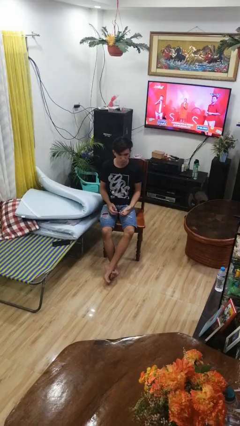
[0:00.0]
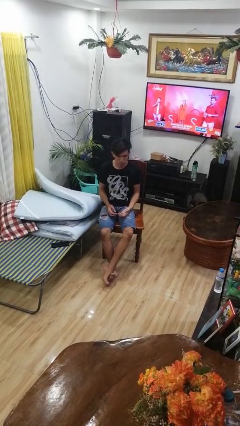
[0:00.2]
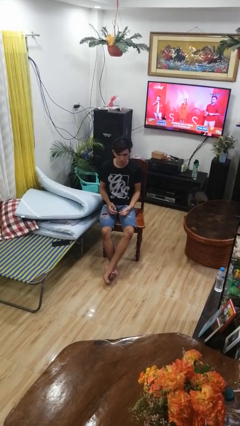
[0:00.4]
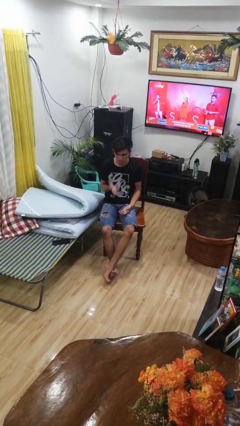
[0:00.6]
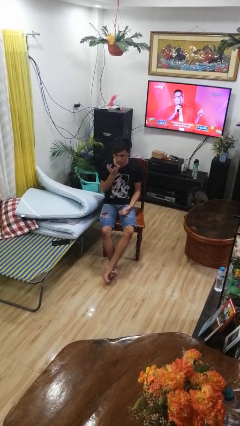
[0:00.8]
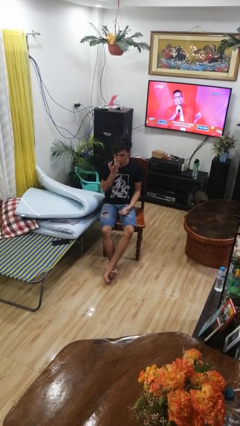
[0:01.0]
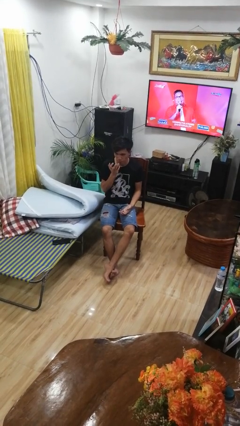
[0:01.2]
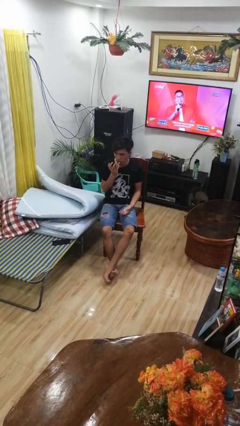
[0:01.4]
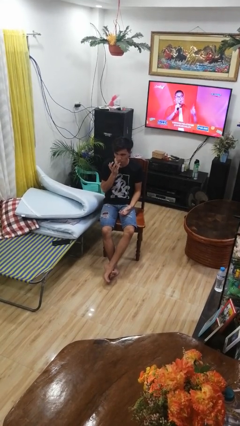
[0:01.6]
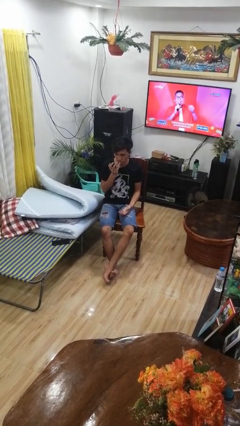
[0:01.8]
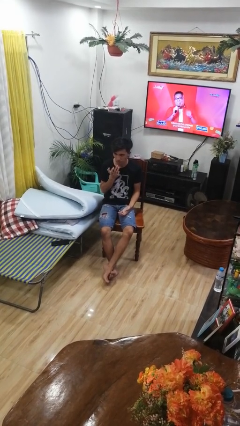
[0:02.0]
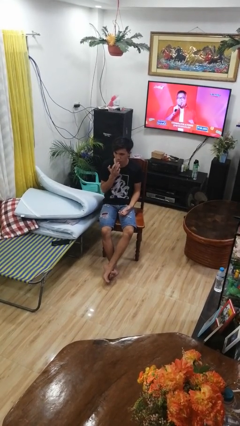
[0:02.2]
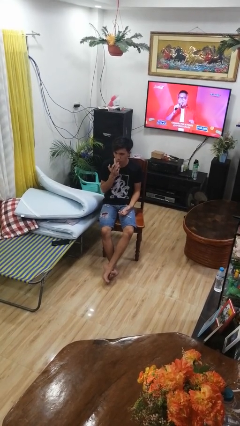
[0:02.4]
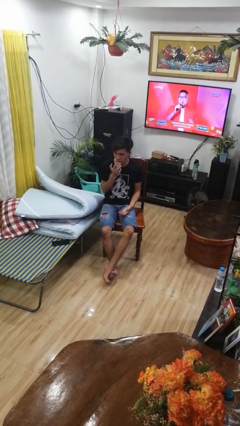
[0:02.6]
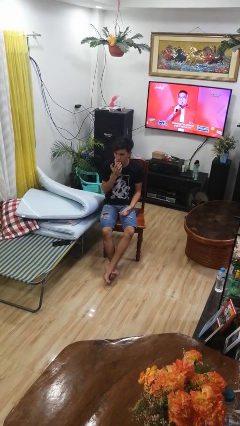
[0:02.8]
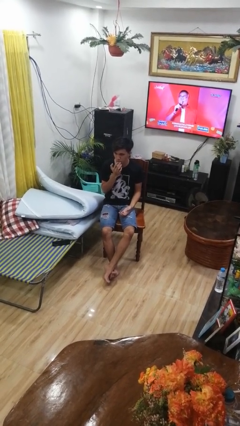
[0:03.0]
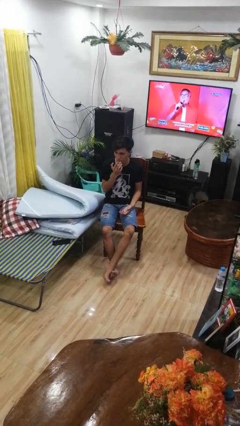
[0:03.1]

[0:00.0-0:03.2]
person licks fingers

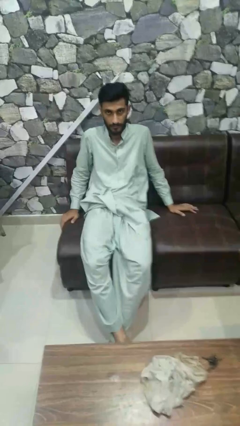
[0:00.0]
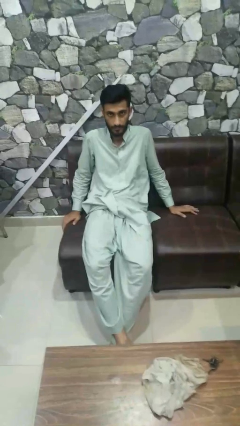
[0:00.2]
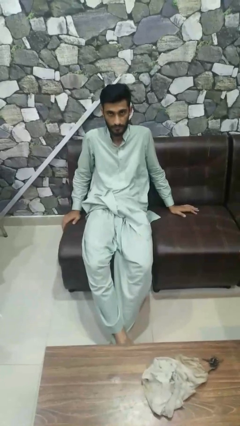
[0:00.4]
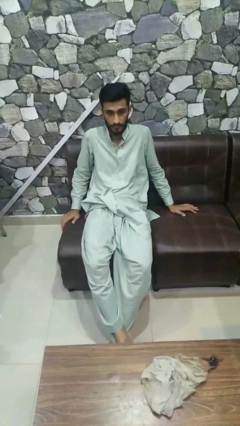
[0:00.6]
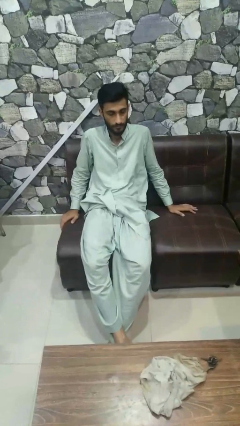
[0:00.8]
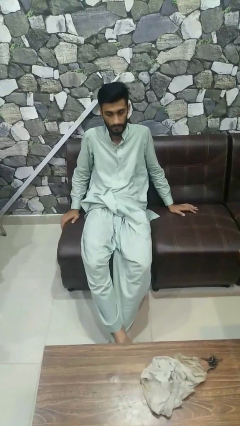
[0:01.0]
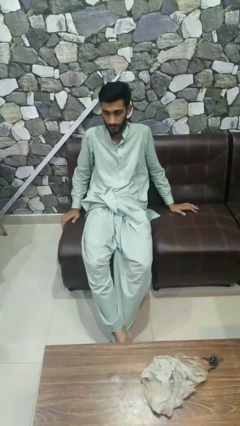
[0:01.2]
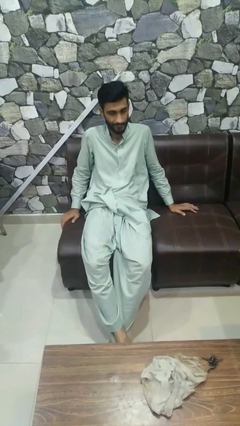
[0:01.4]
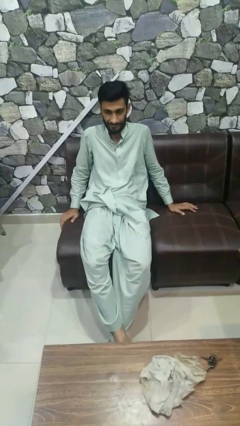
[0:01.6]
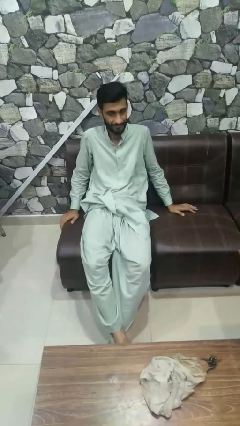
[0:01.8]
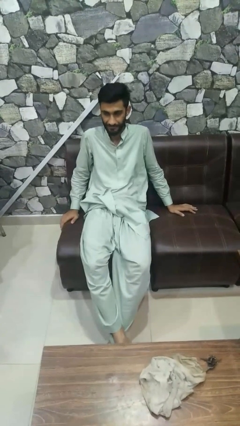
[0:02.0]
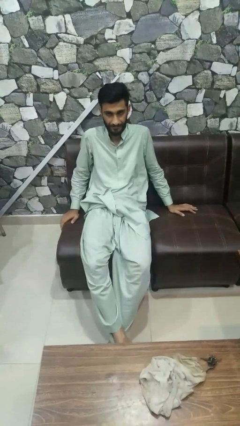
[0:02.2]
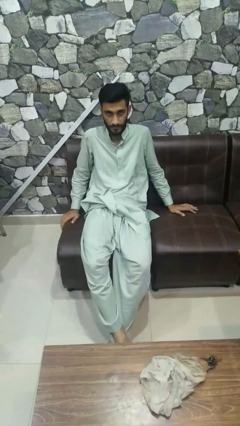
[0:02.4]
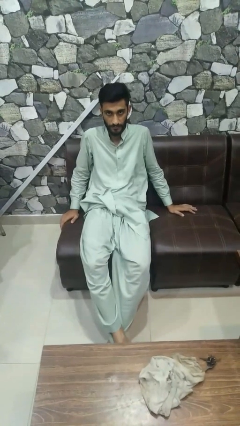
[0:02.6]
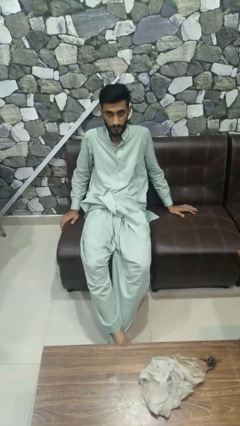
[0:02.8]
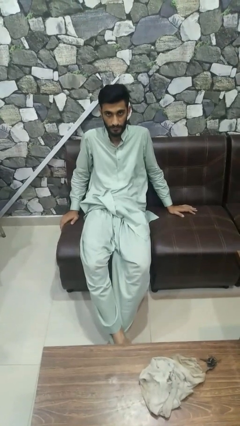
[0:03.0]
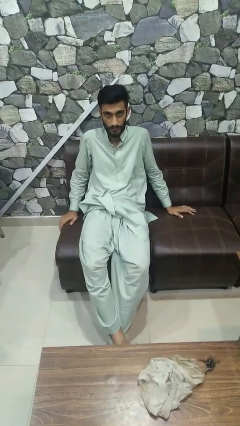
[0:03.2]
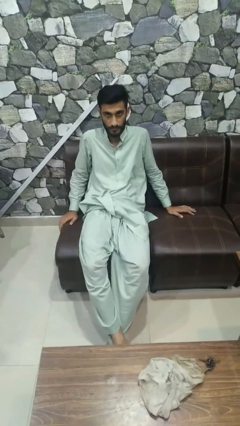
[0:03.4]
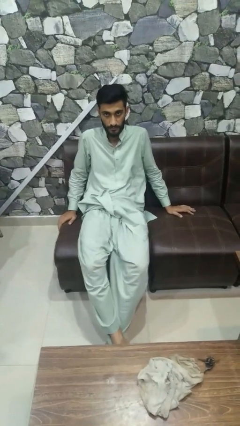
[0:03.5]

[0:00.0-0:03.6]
person shakes head

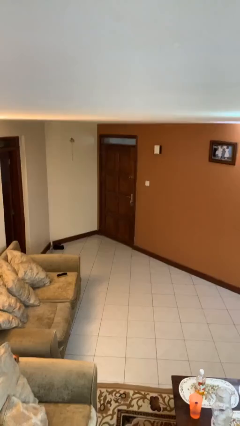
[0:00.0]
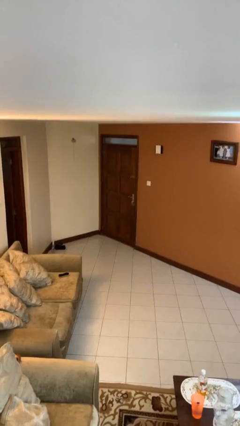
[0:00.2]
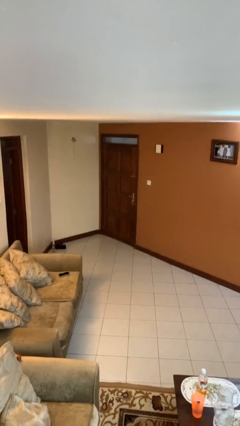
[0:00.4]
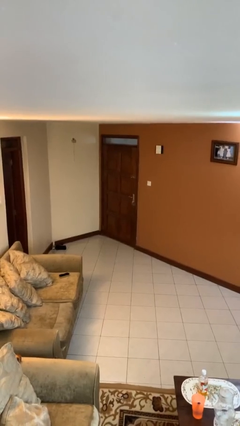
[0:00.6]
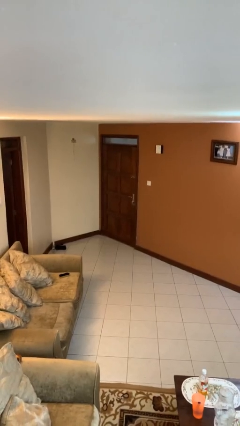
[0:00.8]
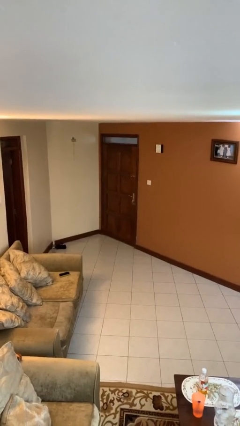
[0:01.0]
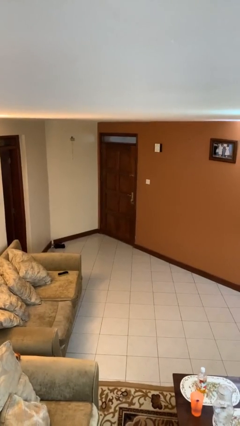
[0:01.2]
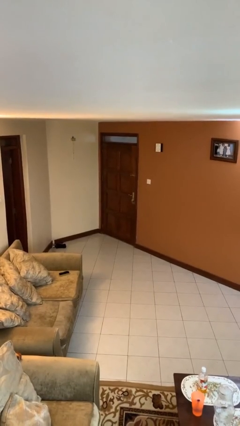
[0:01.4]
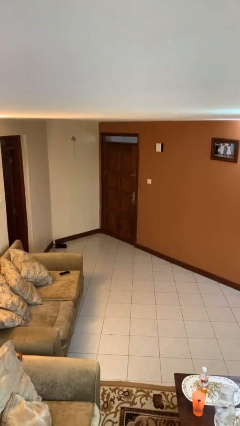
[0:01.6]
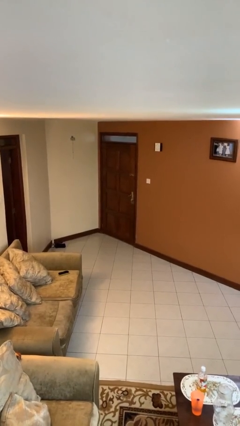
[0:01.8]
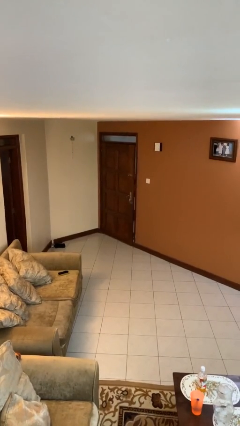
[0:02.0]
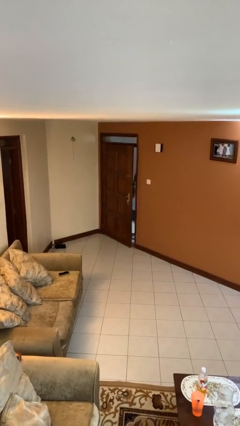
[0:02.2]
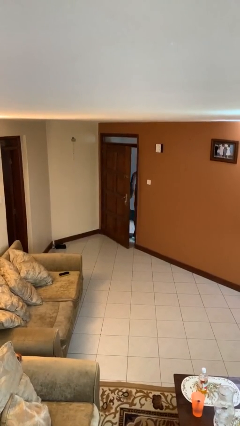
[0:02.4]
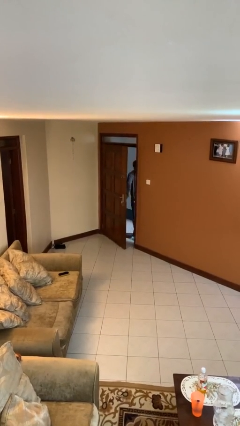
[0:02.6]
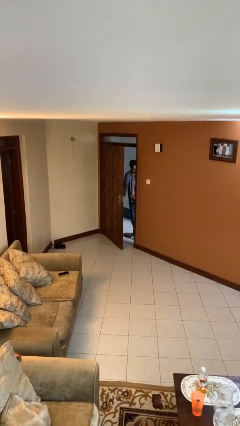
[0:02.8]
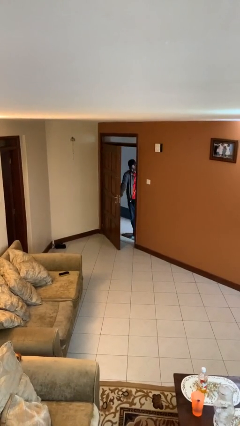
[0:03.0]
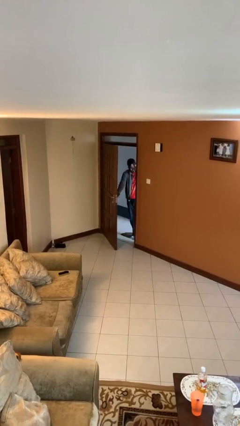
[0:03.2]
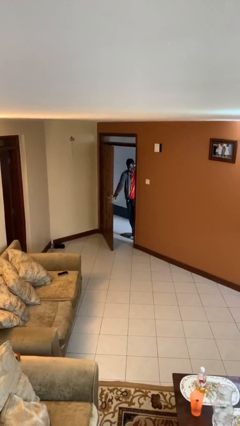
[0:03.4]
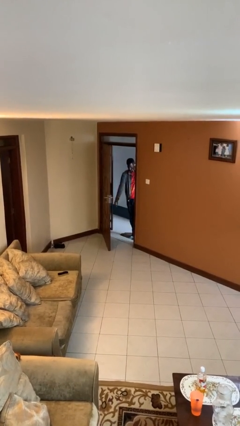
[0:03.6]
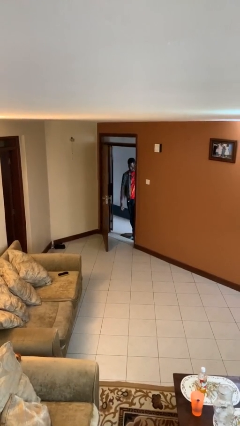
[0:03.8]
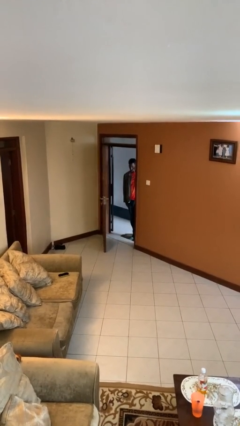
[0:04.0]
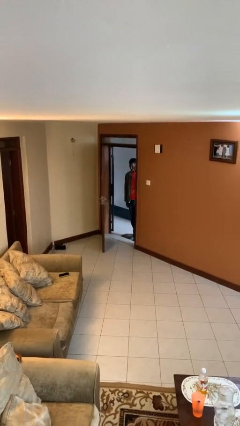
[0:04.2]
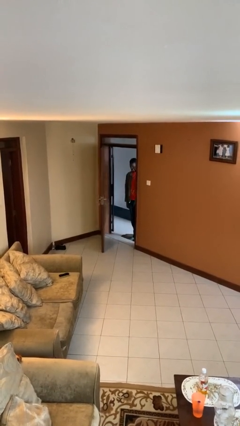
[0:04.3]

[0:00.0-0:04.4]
person opens facility door

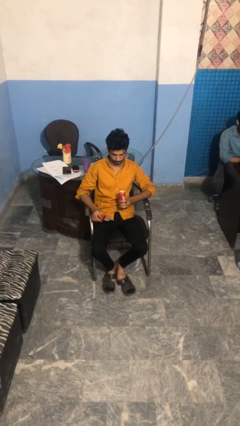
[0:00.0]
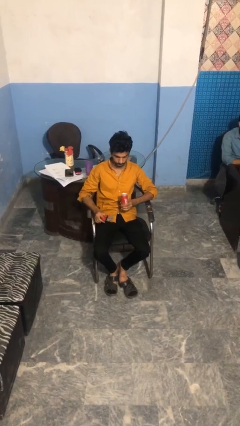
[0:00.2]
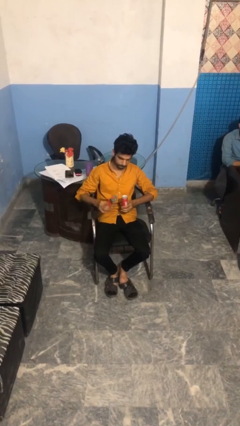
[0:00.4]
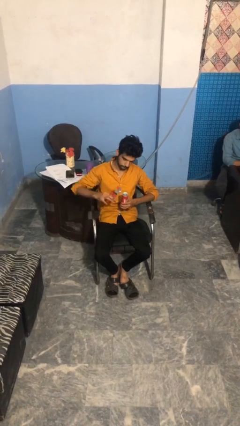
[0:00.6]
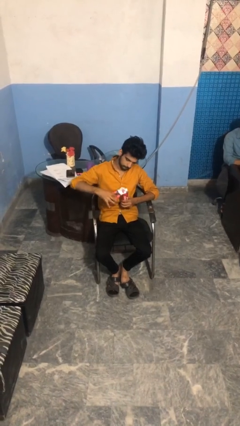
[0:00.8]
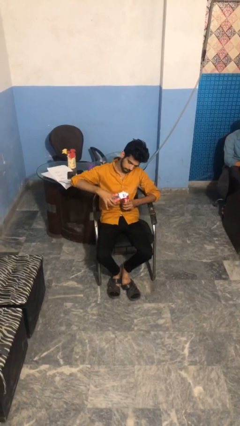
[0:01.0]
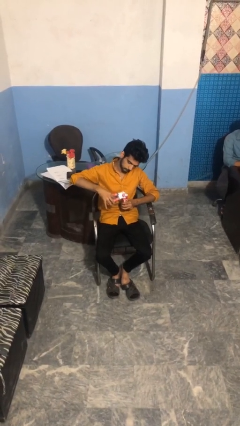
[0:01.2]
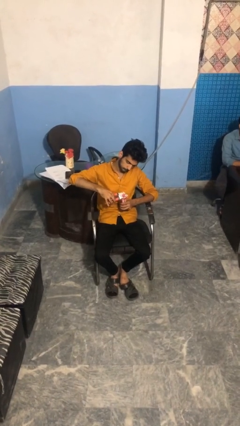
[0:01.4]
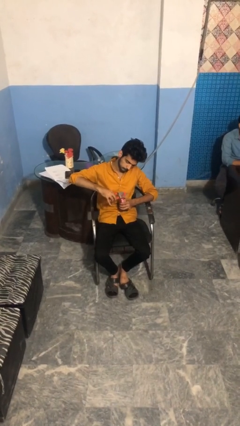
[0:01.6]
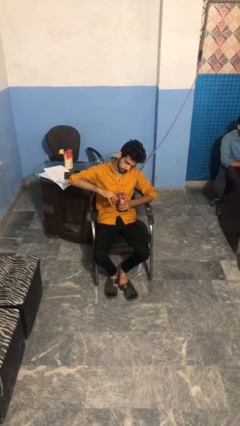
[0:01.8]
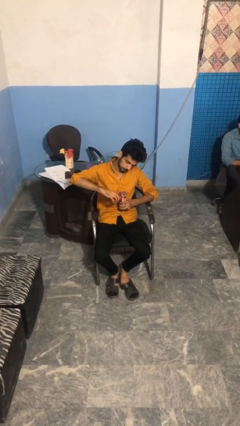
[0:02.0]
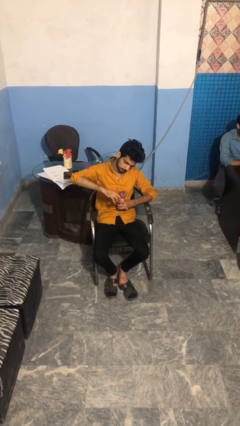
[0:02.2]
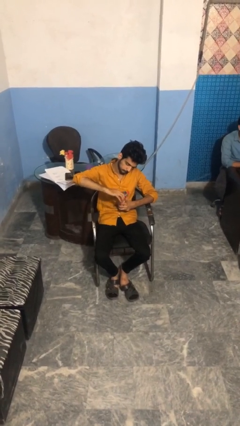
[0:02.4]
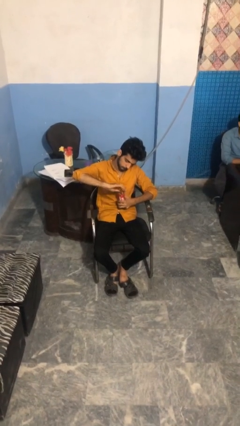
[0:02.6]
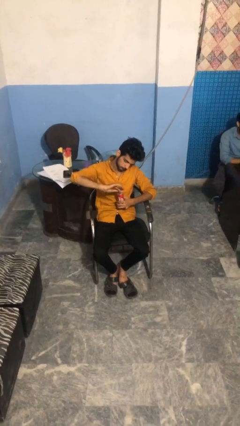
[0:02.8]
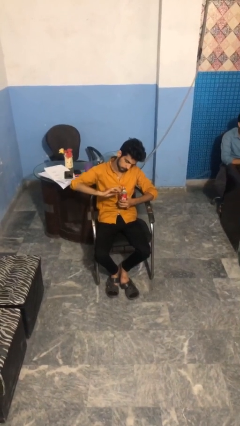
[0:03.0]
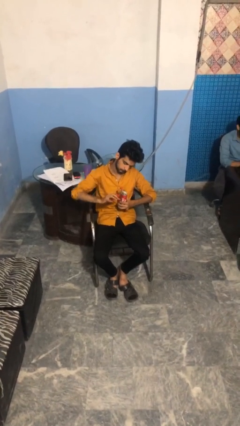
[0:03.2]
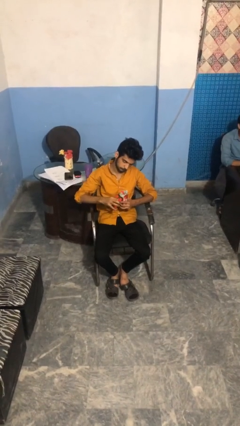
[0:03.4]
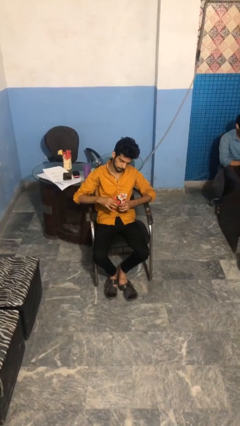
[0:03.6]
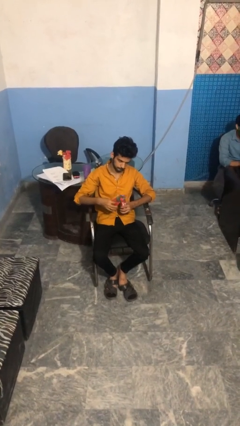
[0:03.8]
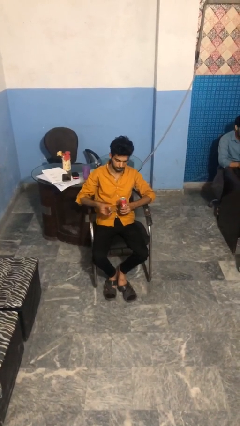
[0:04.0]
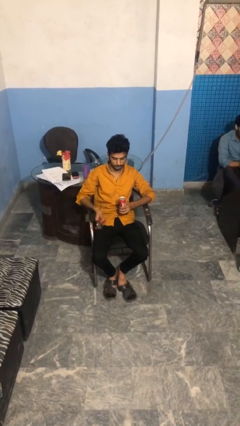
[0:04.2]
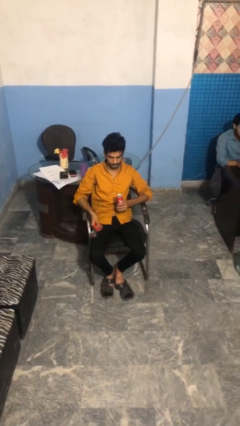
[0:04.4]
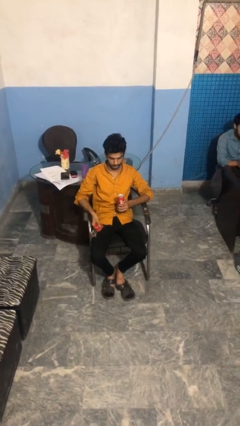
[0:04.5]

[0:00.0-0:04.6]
person opens can with can opener

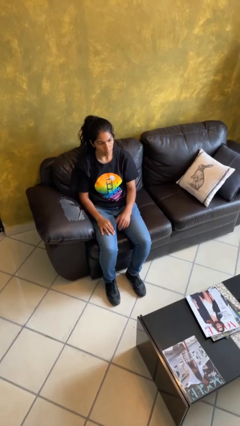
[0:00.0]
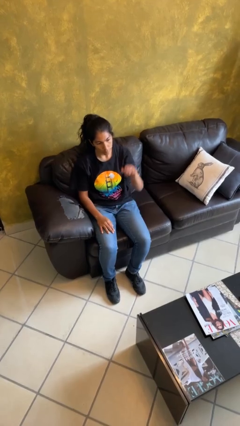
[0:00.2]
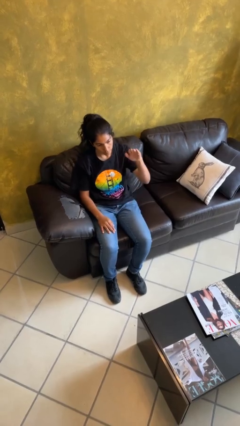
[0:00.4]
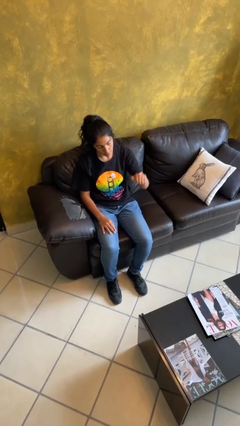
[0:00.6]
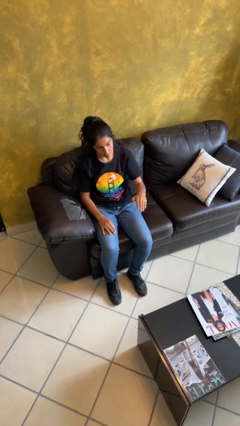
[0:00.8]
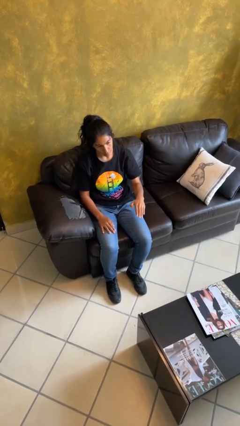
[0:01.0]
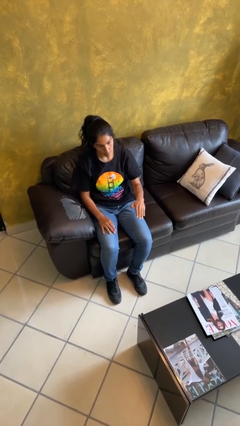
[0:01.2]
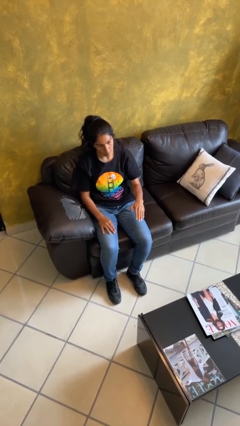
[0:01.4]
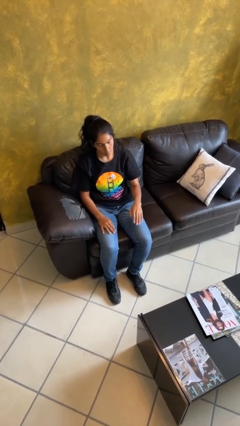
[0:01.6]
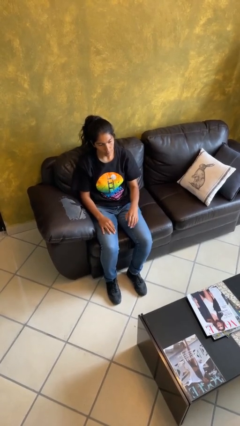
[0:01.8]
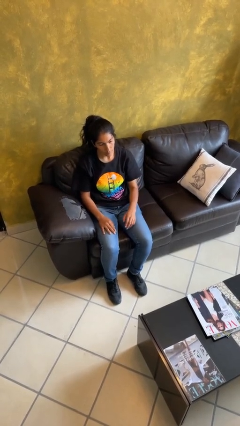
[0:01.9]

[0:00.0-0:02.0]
person gestures swipe down
